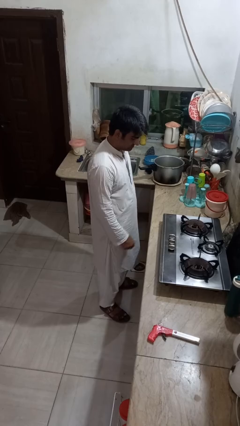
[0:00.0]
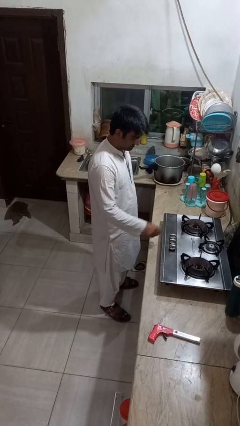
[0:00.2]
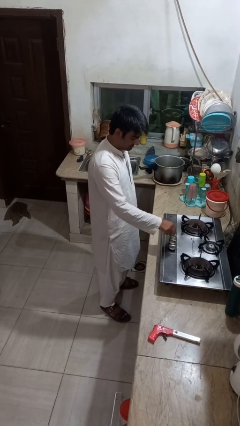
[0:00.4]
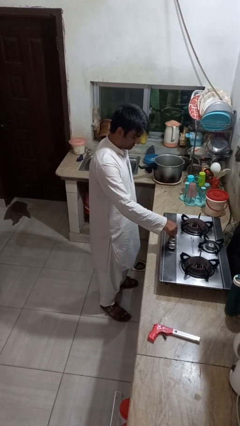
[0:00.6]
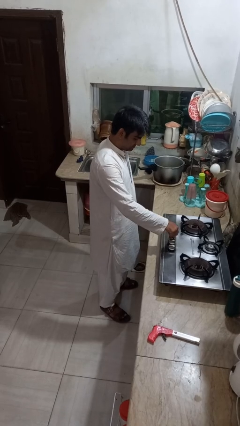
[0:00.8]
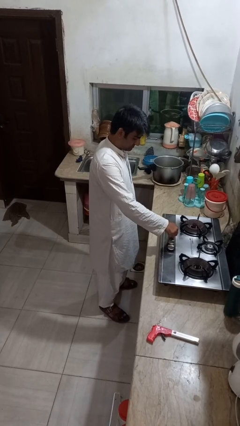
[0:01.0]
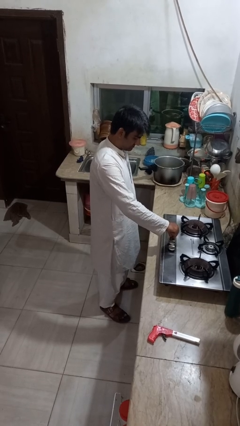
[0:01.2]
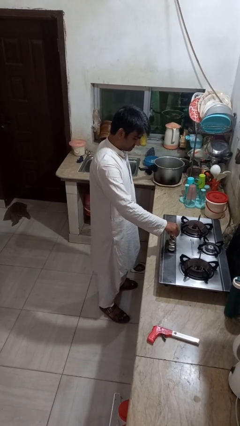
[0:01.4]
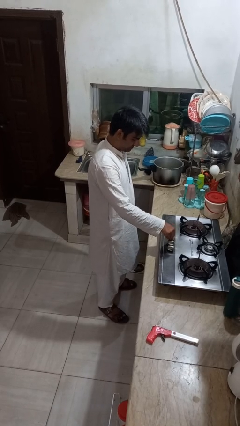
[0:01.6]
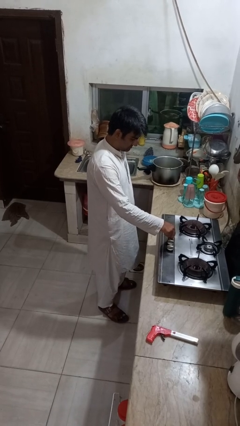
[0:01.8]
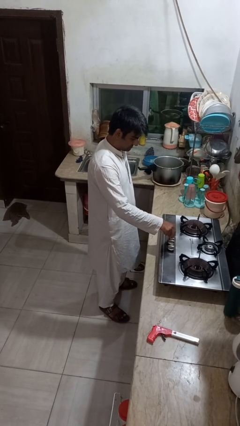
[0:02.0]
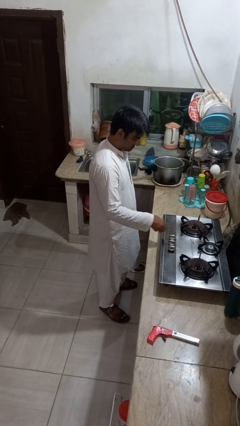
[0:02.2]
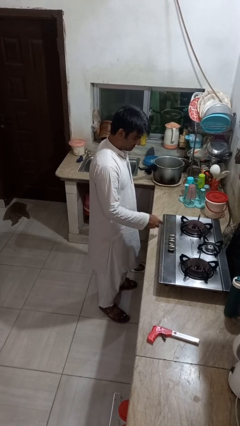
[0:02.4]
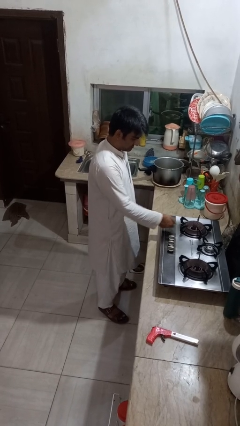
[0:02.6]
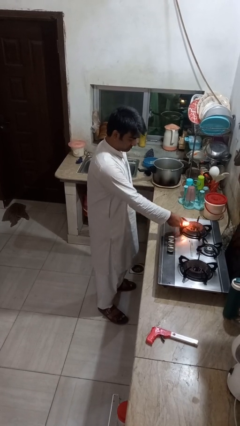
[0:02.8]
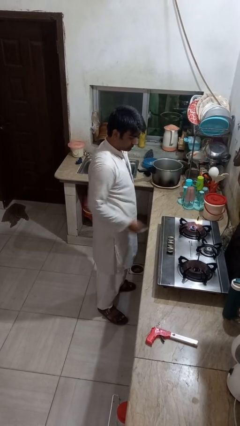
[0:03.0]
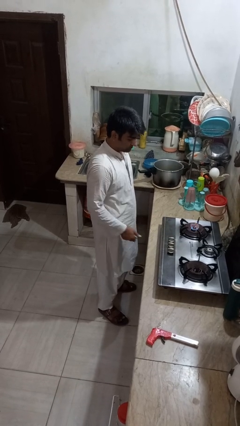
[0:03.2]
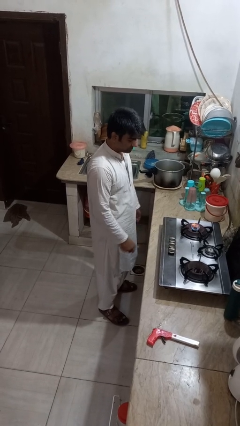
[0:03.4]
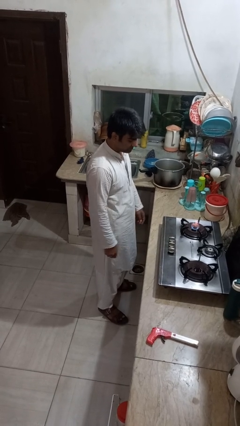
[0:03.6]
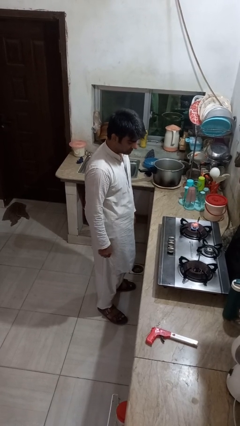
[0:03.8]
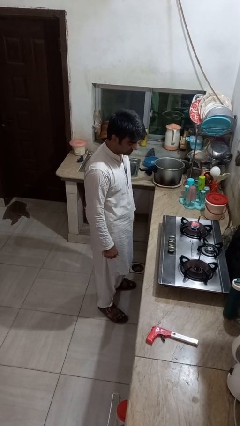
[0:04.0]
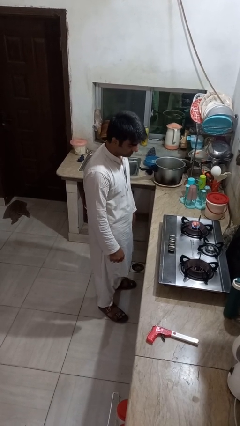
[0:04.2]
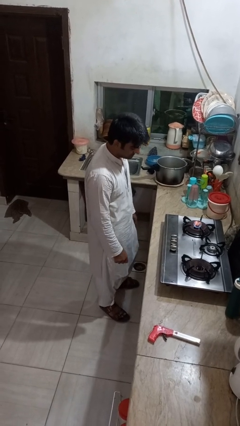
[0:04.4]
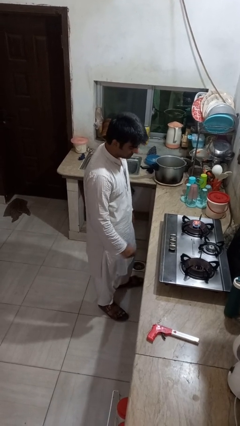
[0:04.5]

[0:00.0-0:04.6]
person turns on stovetop

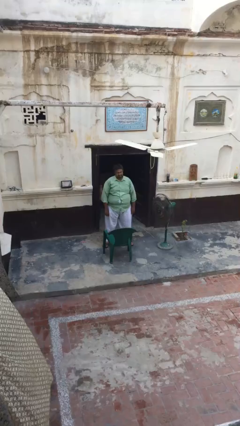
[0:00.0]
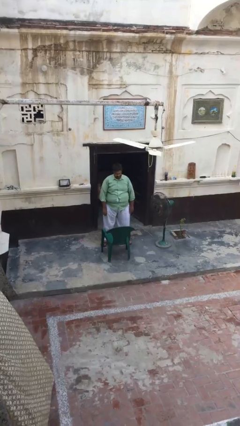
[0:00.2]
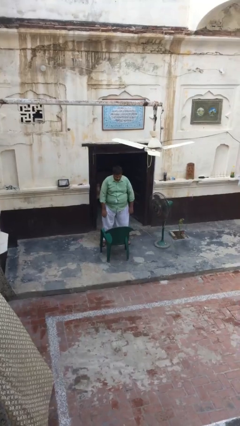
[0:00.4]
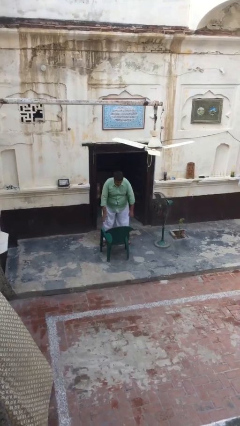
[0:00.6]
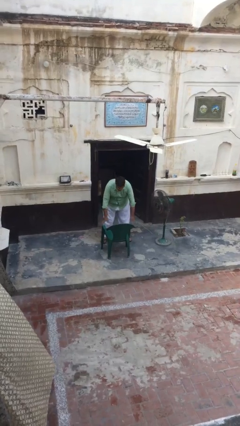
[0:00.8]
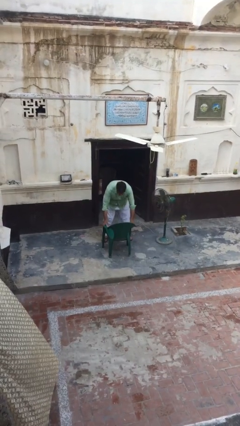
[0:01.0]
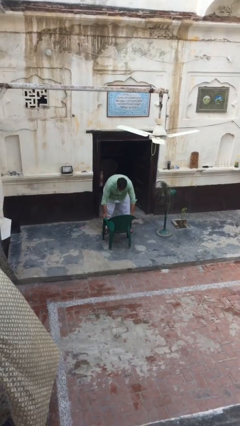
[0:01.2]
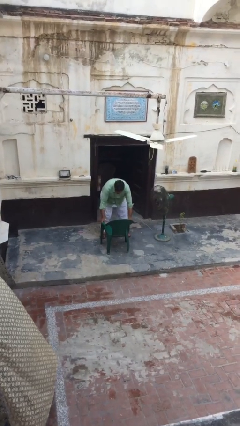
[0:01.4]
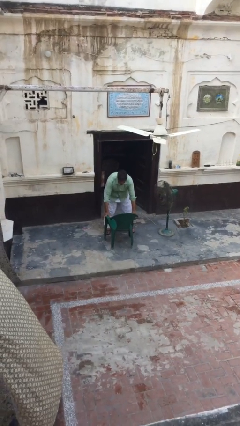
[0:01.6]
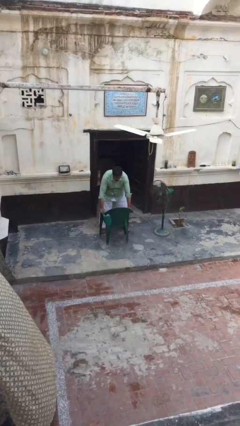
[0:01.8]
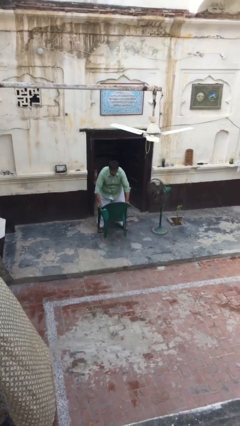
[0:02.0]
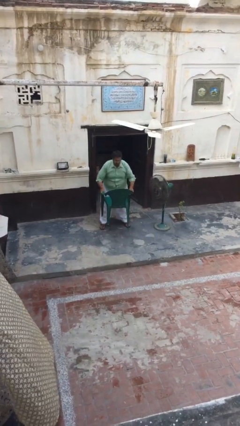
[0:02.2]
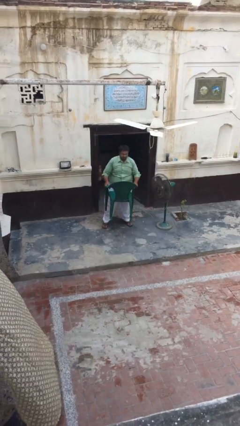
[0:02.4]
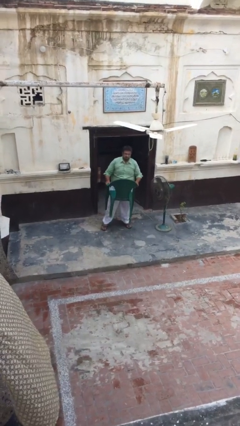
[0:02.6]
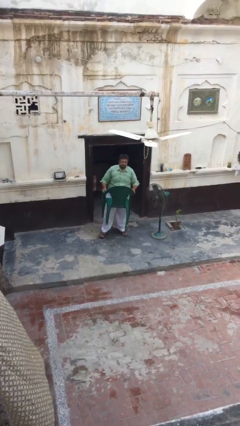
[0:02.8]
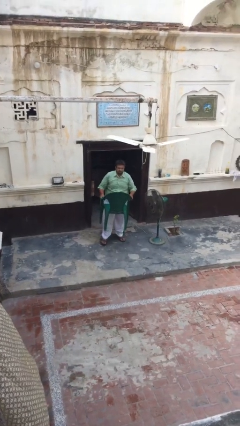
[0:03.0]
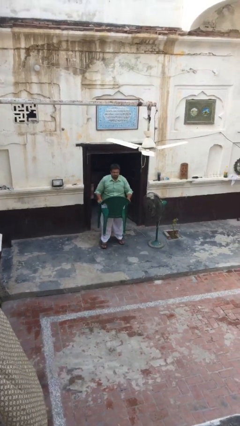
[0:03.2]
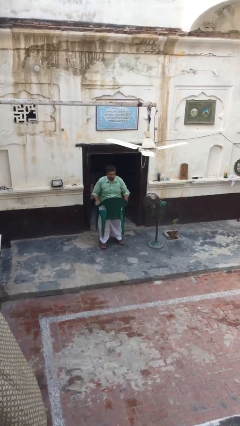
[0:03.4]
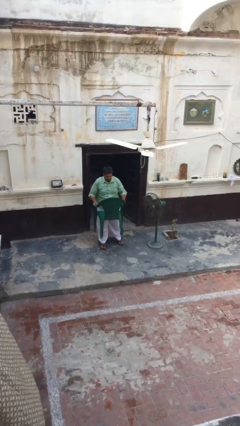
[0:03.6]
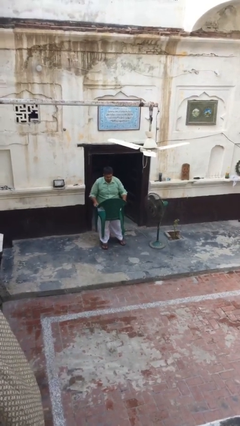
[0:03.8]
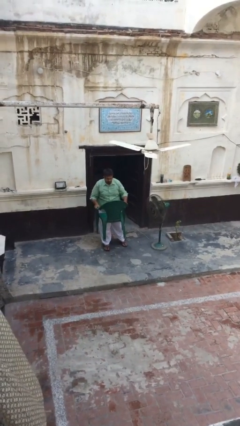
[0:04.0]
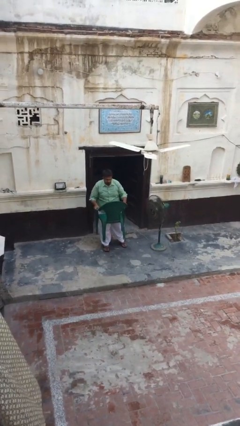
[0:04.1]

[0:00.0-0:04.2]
person picks up object from floor

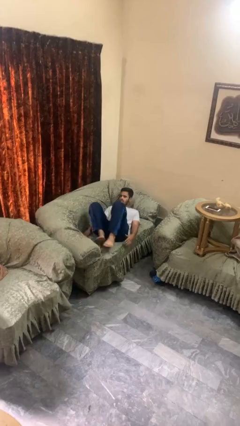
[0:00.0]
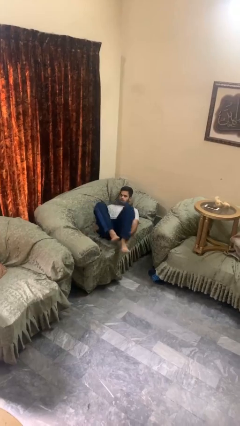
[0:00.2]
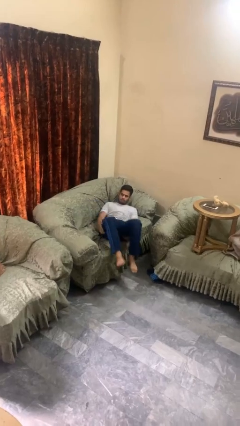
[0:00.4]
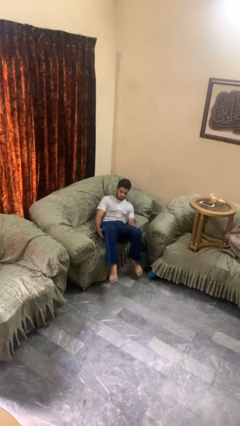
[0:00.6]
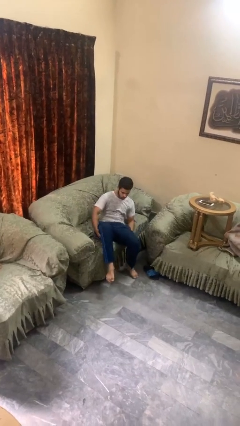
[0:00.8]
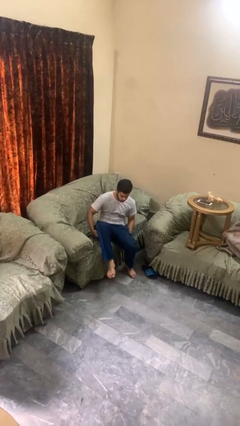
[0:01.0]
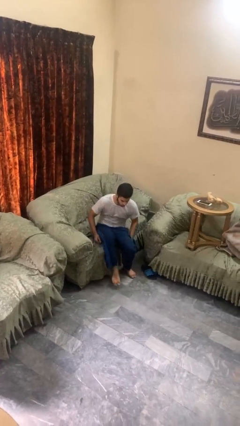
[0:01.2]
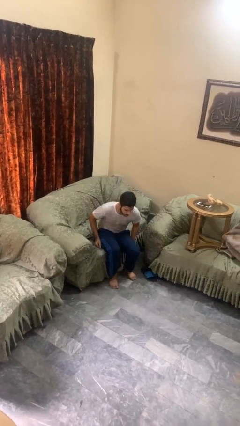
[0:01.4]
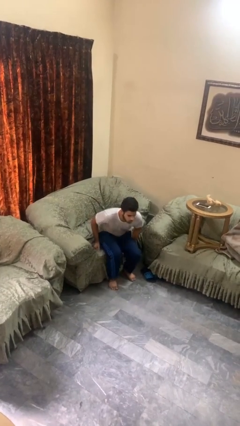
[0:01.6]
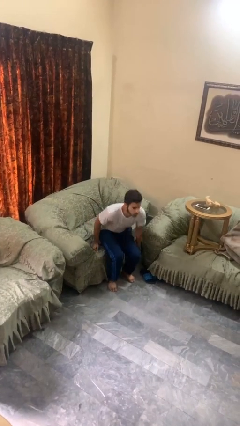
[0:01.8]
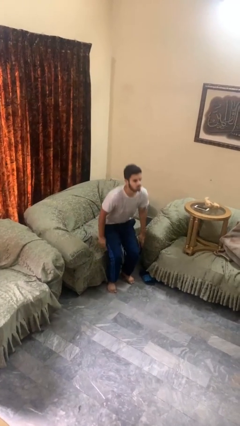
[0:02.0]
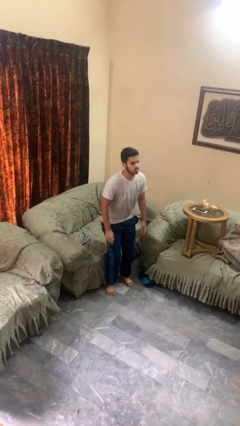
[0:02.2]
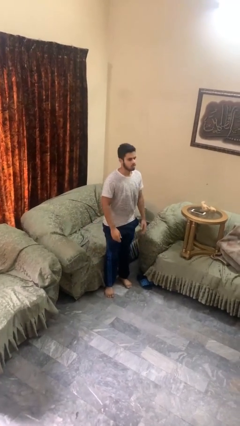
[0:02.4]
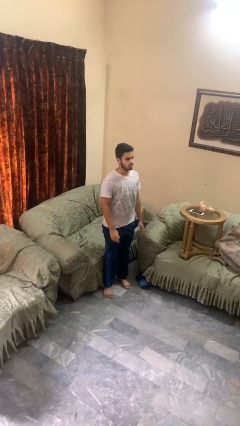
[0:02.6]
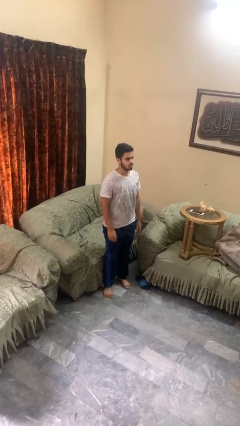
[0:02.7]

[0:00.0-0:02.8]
person stands up

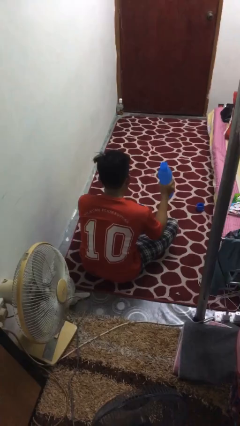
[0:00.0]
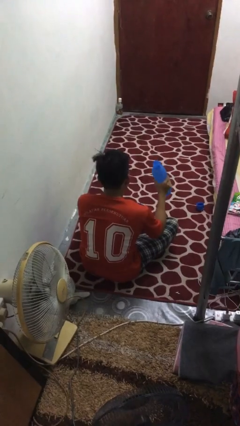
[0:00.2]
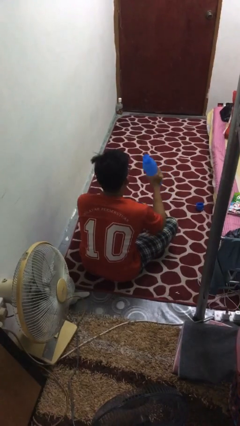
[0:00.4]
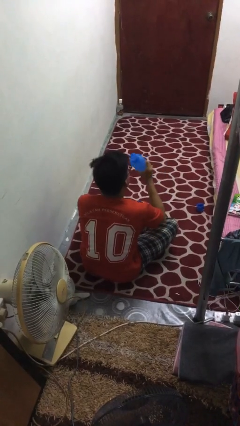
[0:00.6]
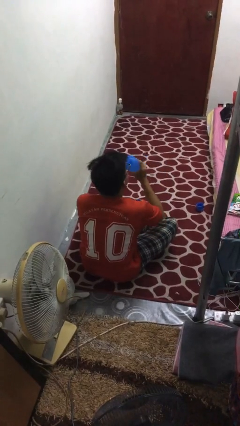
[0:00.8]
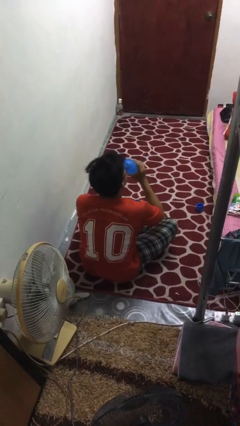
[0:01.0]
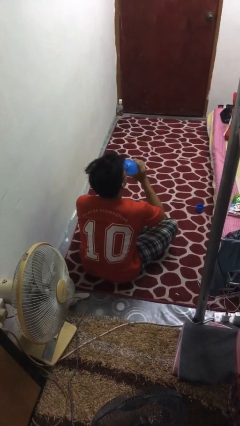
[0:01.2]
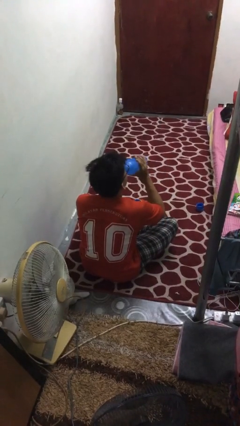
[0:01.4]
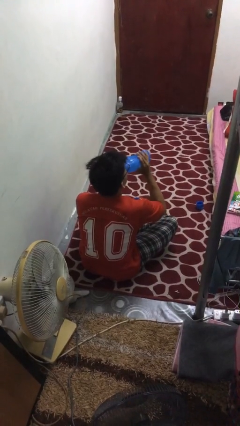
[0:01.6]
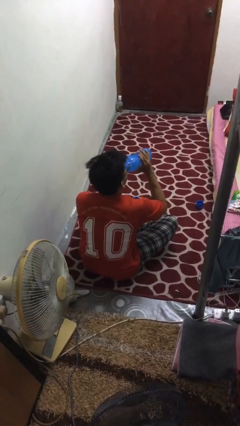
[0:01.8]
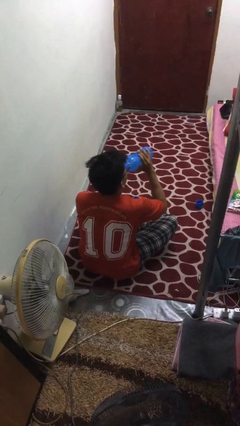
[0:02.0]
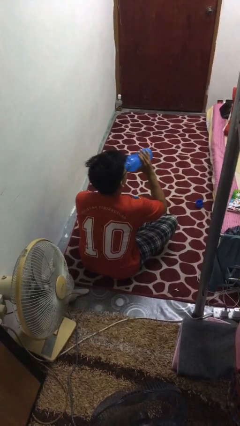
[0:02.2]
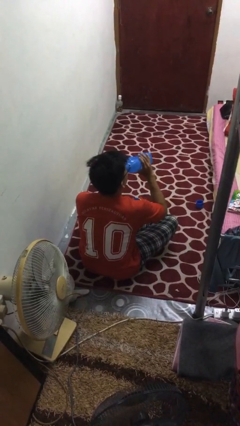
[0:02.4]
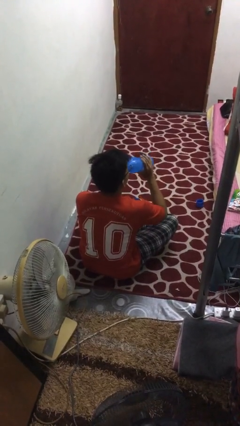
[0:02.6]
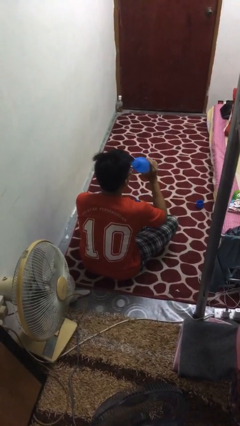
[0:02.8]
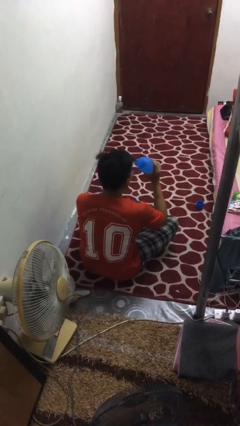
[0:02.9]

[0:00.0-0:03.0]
person drinks from bottle

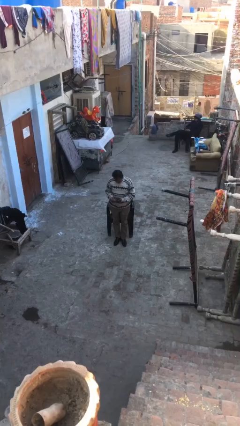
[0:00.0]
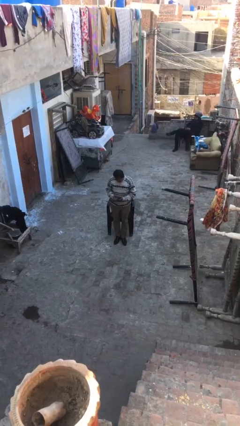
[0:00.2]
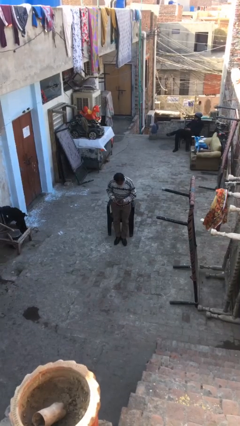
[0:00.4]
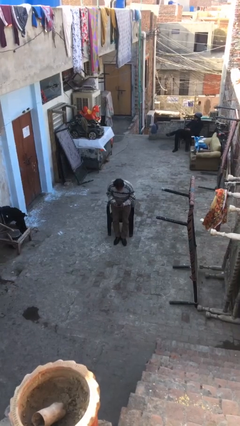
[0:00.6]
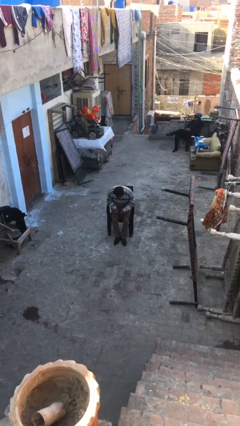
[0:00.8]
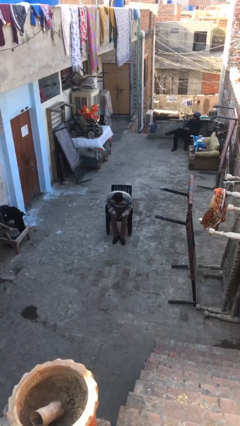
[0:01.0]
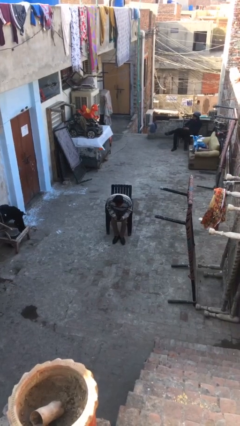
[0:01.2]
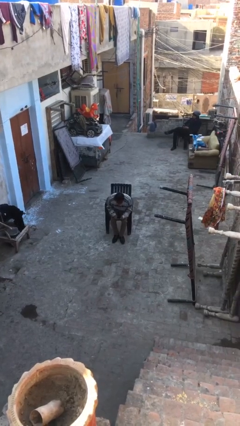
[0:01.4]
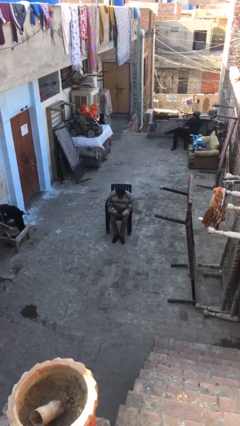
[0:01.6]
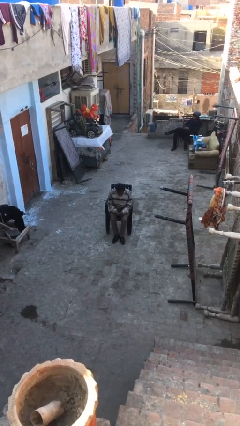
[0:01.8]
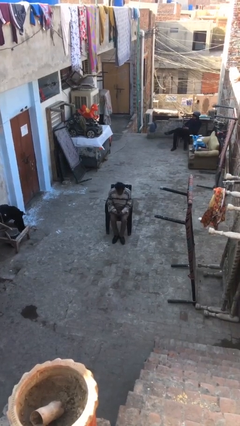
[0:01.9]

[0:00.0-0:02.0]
person sits down

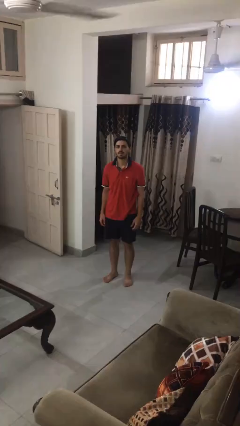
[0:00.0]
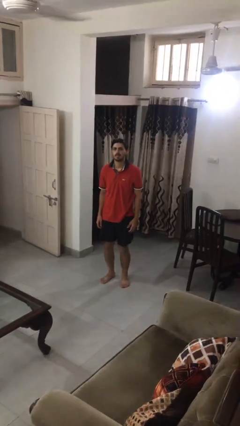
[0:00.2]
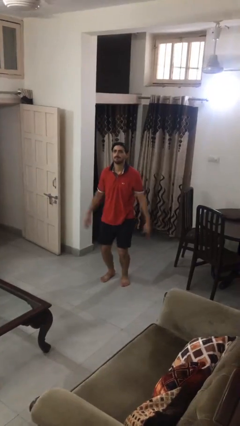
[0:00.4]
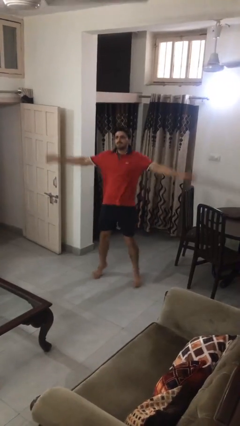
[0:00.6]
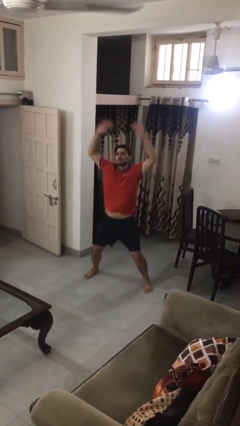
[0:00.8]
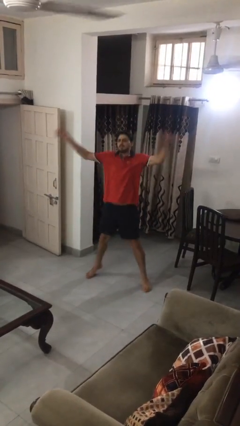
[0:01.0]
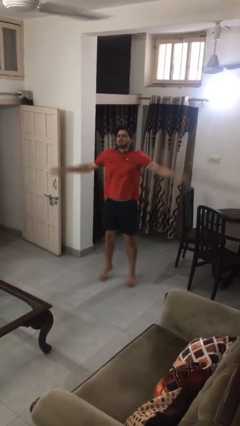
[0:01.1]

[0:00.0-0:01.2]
person exercises with jumping jacks
